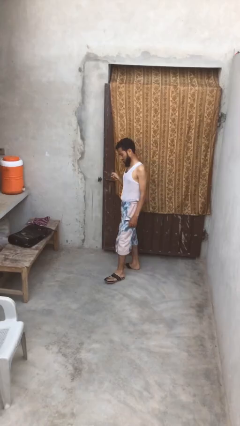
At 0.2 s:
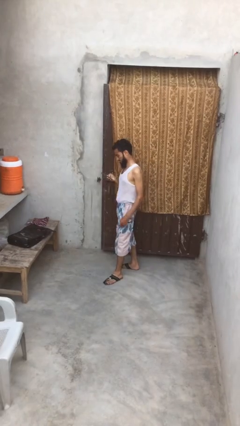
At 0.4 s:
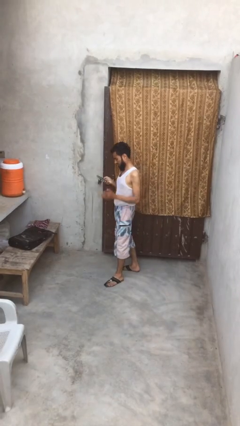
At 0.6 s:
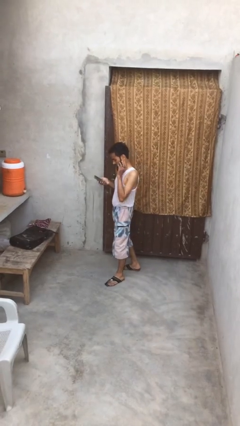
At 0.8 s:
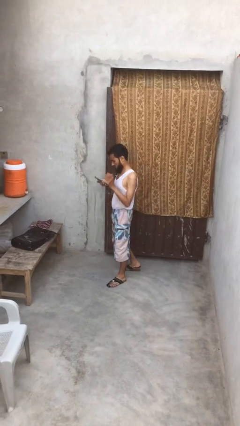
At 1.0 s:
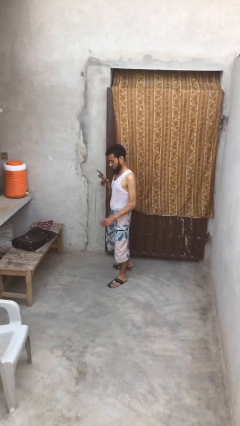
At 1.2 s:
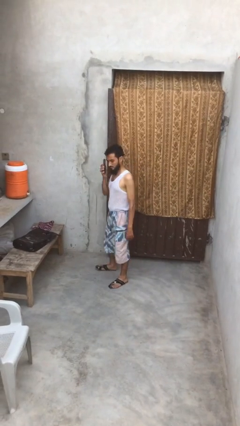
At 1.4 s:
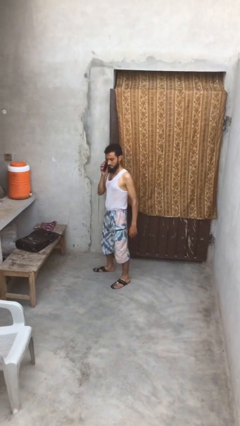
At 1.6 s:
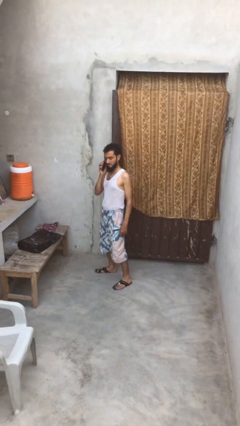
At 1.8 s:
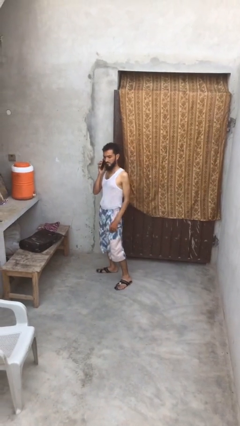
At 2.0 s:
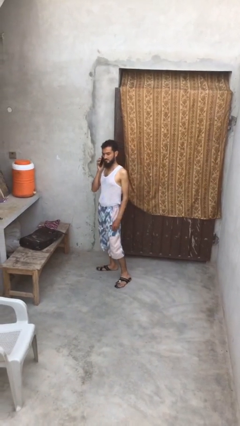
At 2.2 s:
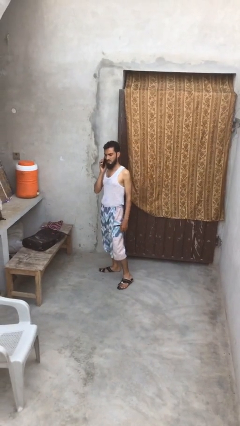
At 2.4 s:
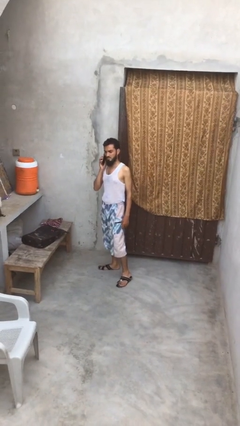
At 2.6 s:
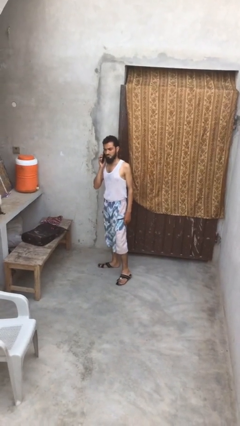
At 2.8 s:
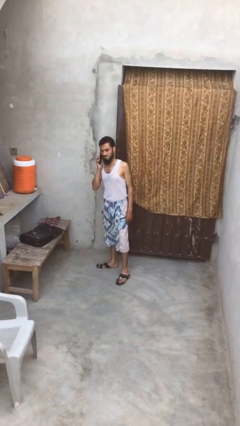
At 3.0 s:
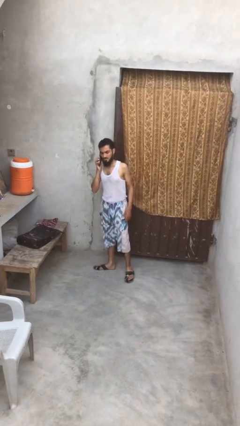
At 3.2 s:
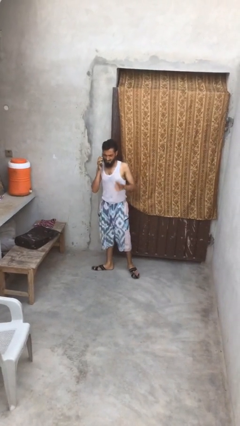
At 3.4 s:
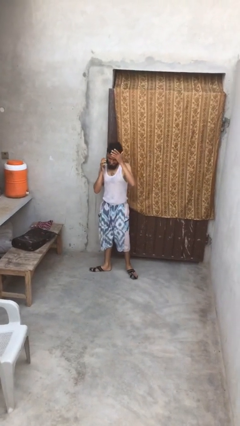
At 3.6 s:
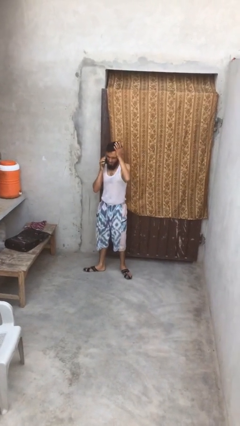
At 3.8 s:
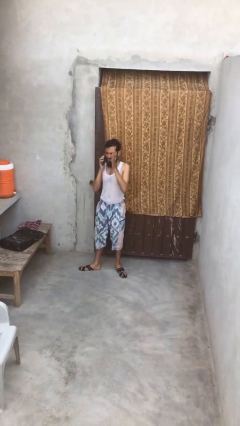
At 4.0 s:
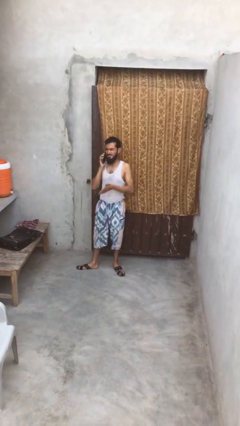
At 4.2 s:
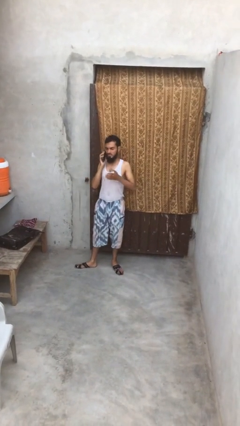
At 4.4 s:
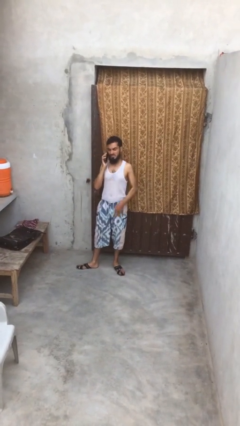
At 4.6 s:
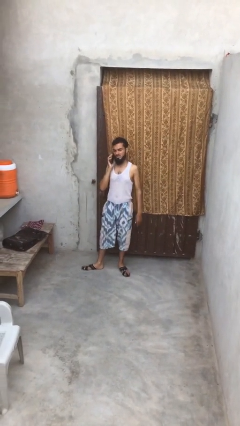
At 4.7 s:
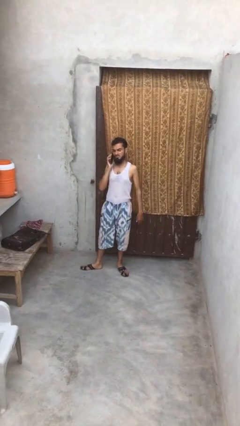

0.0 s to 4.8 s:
person talks on phone

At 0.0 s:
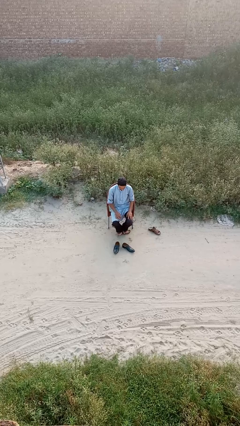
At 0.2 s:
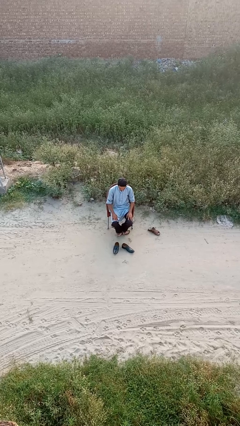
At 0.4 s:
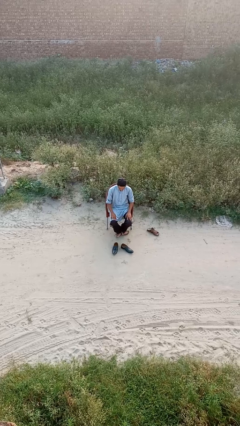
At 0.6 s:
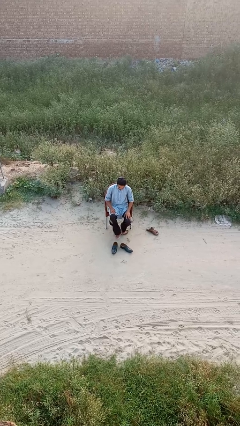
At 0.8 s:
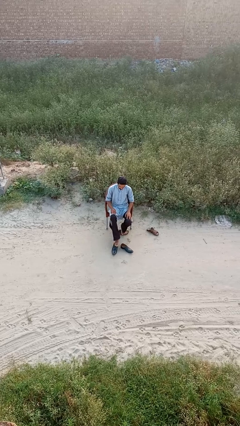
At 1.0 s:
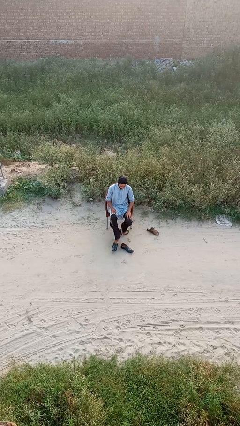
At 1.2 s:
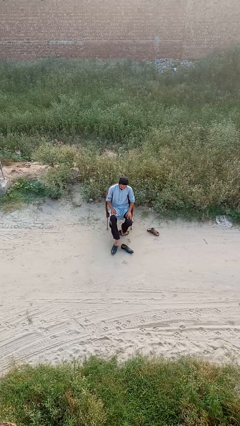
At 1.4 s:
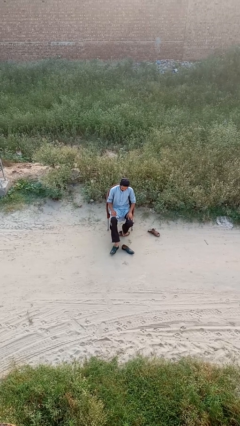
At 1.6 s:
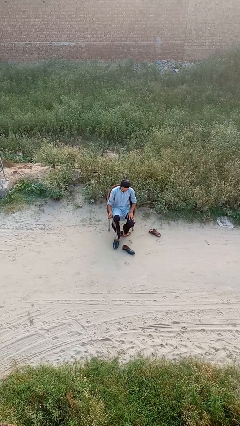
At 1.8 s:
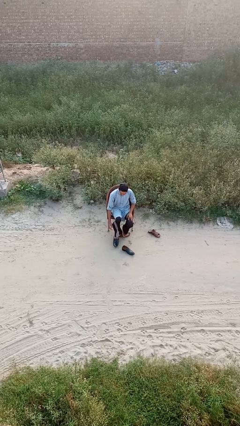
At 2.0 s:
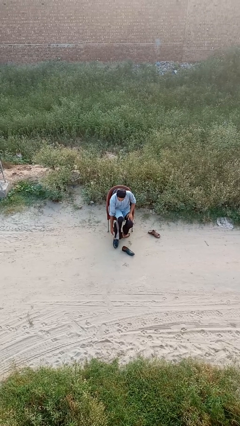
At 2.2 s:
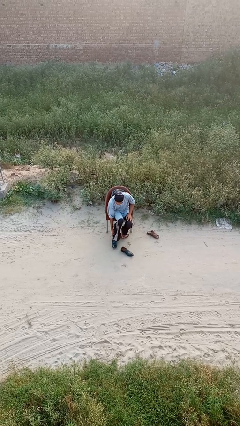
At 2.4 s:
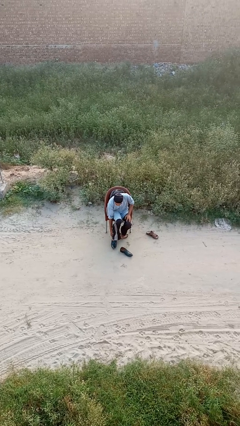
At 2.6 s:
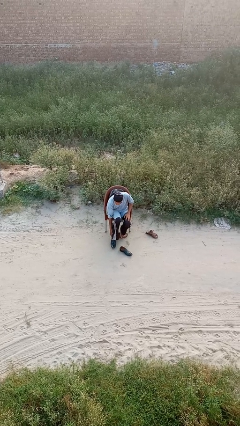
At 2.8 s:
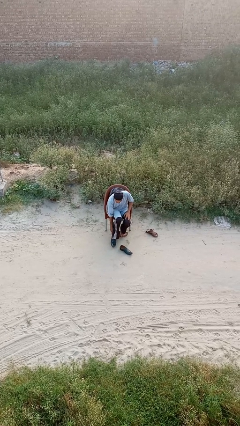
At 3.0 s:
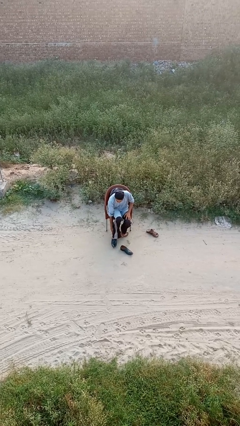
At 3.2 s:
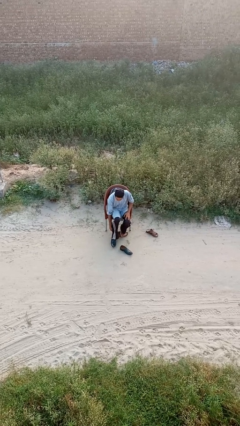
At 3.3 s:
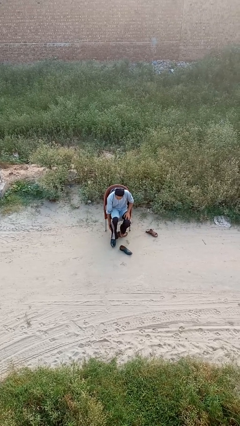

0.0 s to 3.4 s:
person puts on shoes

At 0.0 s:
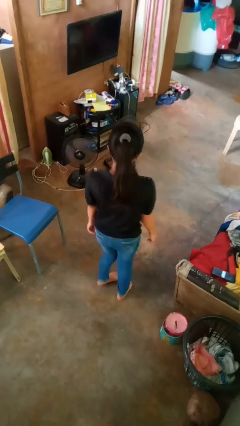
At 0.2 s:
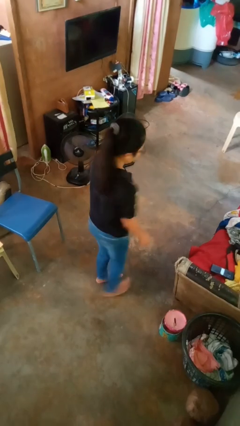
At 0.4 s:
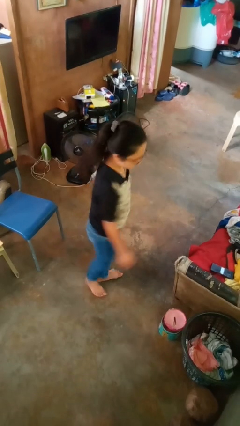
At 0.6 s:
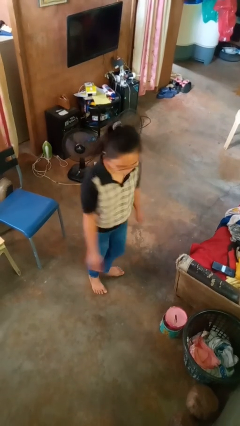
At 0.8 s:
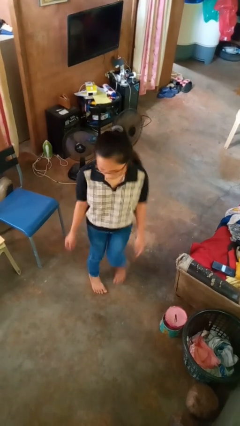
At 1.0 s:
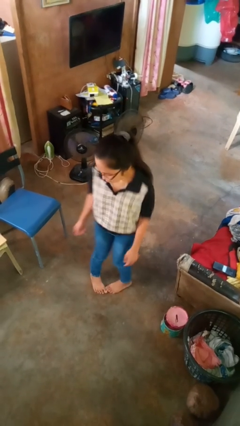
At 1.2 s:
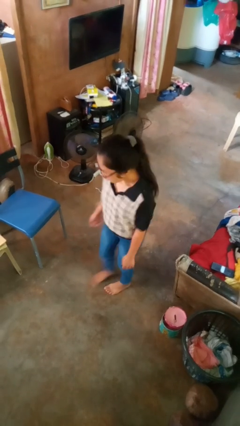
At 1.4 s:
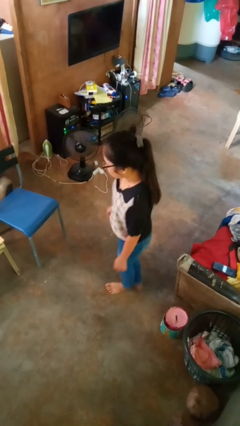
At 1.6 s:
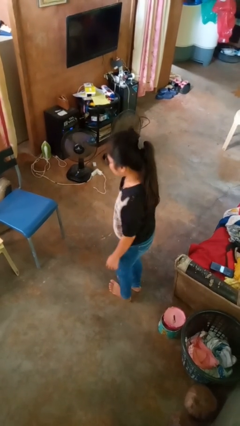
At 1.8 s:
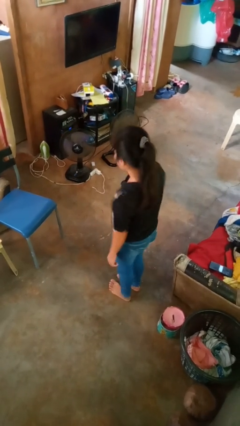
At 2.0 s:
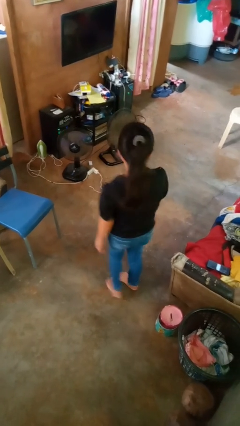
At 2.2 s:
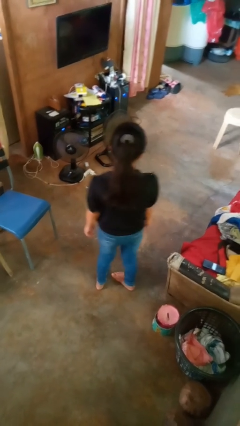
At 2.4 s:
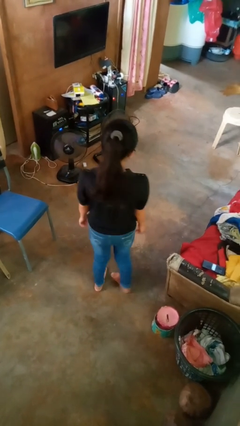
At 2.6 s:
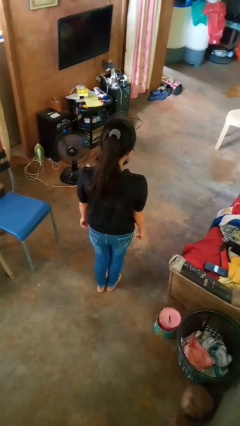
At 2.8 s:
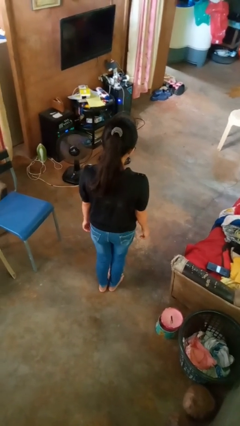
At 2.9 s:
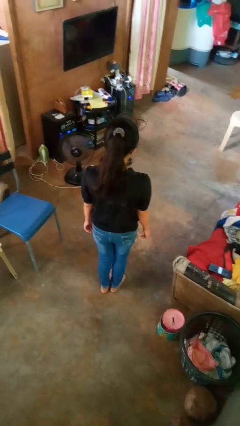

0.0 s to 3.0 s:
person twirls

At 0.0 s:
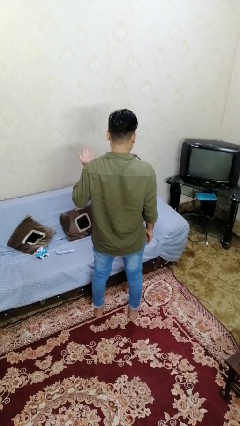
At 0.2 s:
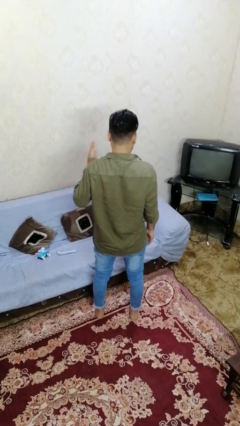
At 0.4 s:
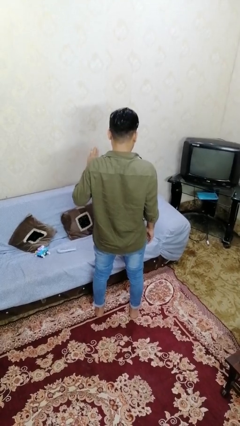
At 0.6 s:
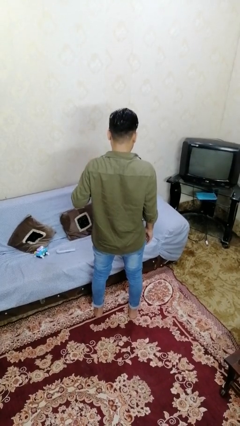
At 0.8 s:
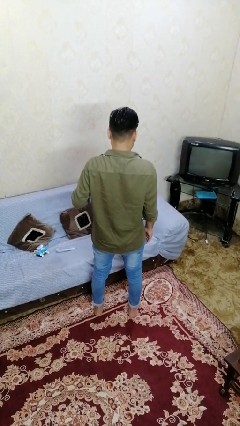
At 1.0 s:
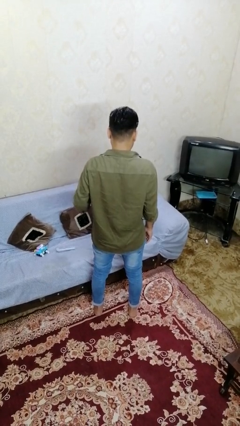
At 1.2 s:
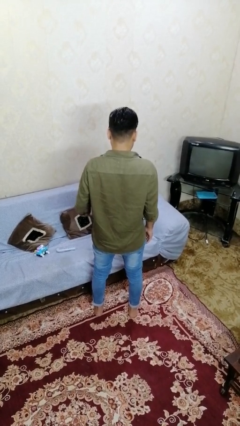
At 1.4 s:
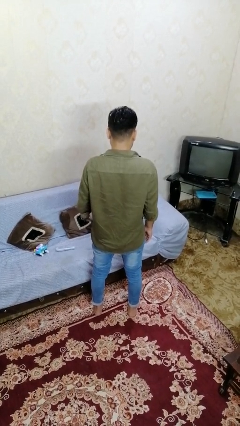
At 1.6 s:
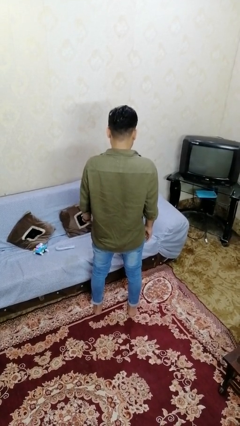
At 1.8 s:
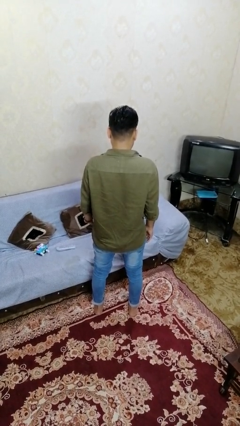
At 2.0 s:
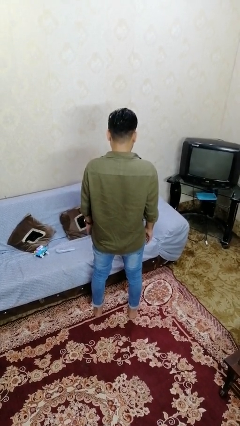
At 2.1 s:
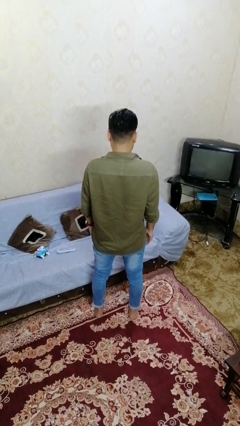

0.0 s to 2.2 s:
person gestures swipe down

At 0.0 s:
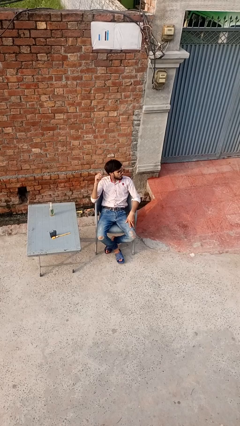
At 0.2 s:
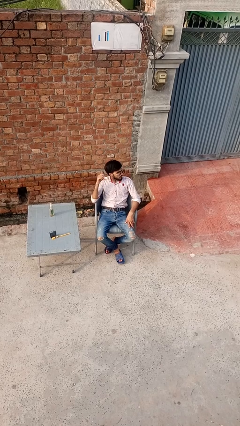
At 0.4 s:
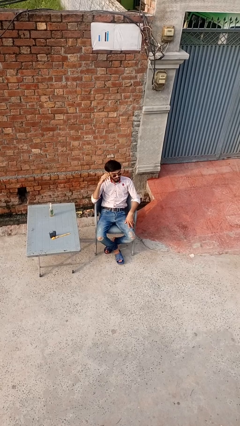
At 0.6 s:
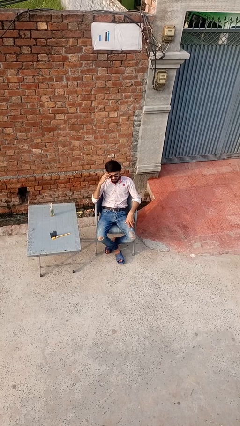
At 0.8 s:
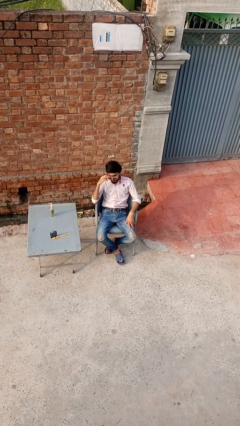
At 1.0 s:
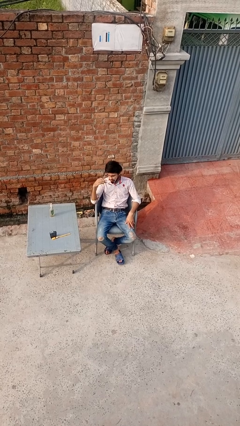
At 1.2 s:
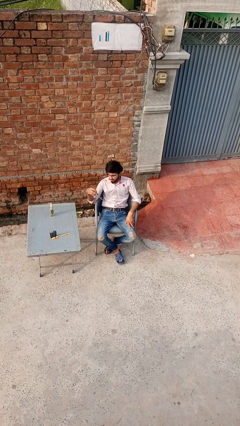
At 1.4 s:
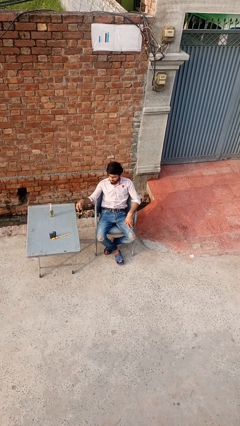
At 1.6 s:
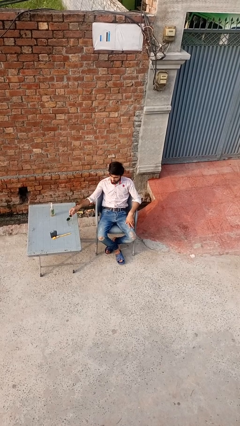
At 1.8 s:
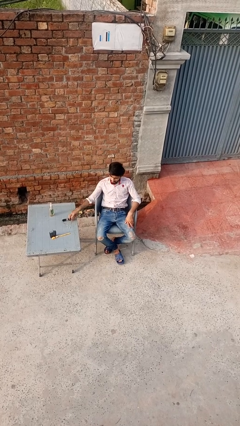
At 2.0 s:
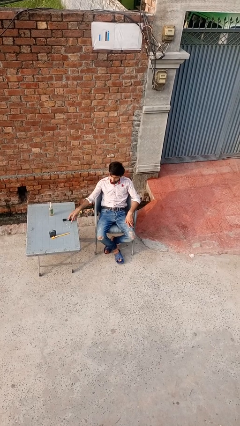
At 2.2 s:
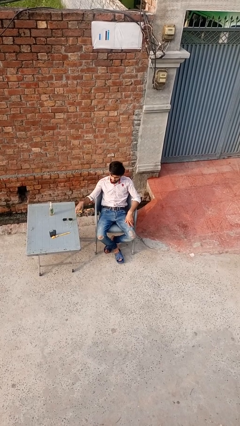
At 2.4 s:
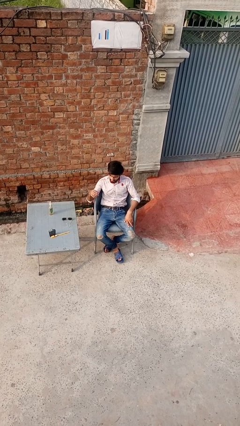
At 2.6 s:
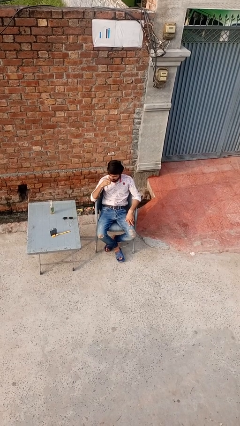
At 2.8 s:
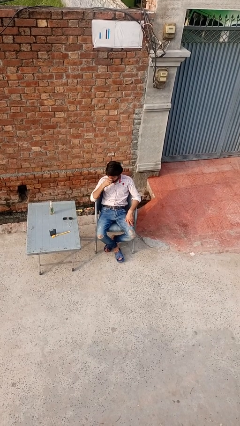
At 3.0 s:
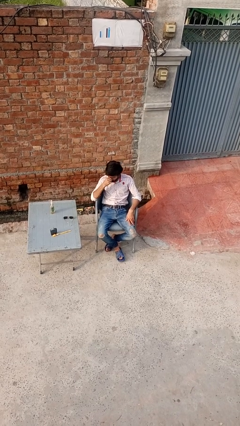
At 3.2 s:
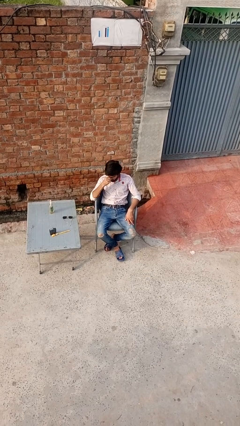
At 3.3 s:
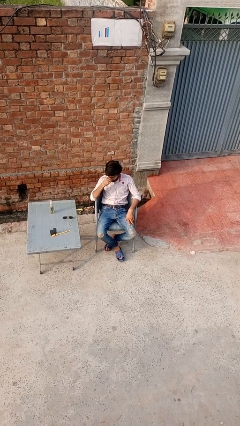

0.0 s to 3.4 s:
person takes off sunglasses

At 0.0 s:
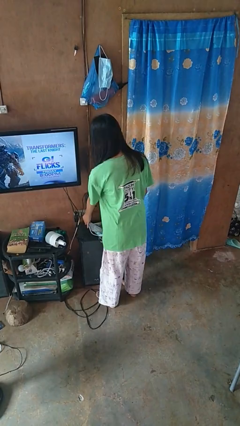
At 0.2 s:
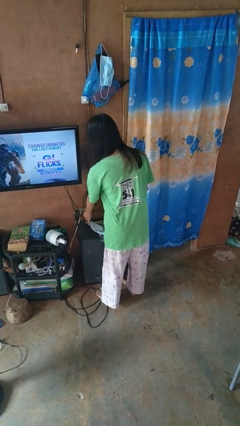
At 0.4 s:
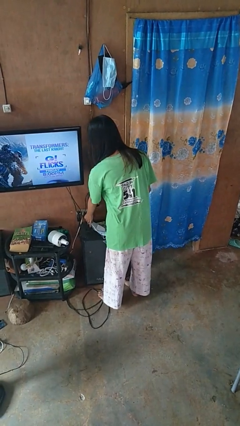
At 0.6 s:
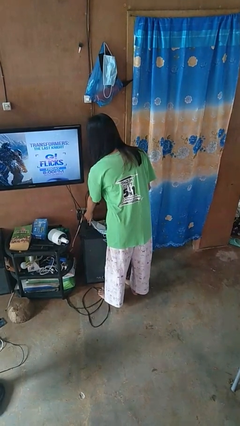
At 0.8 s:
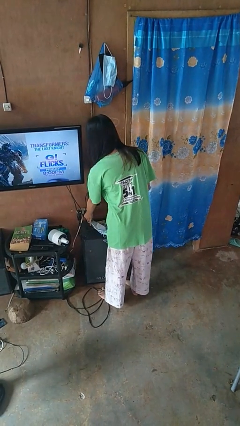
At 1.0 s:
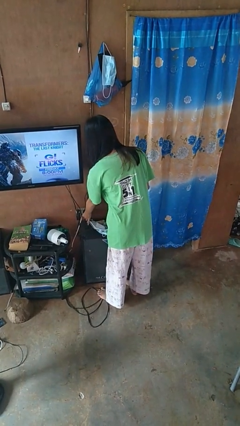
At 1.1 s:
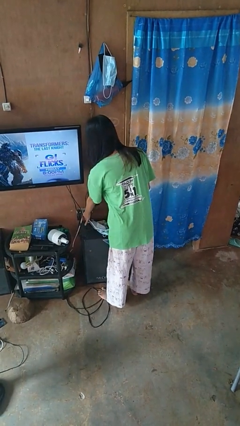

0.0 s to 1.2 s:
person plugs into electrical socket
